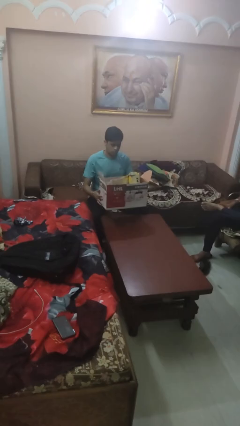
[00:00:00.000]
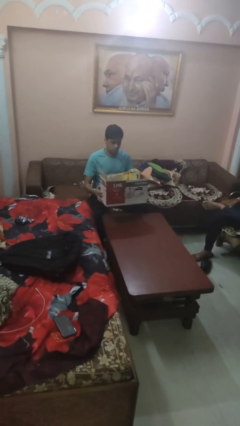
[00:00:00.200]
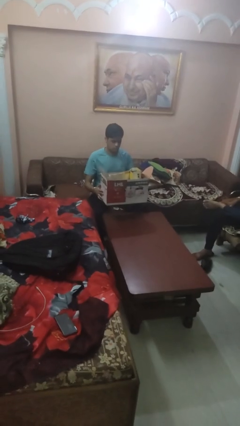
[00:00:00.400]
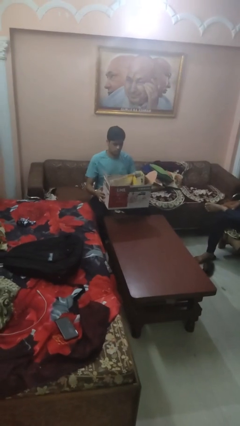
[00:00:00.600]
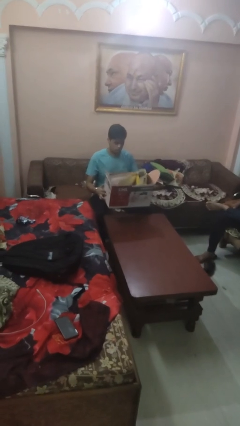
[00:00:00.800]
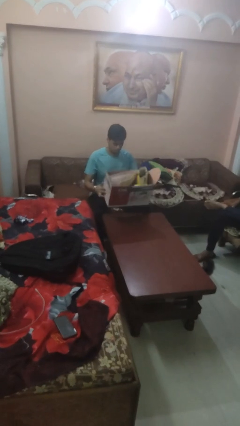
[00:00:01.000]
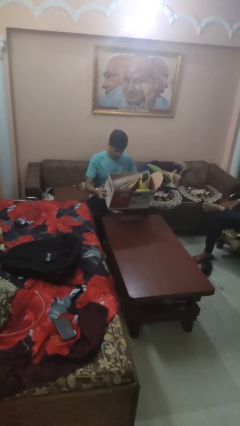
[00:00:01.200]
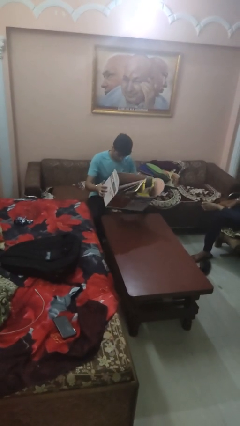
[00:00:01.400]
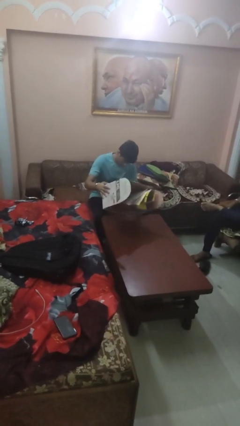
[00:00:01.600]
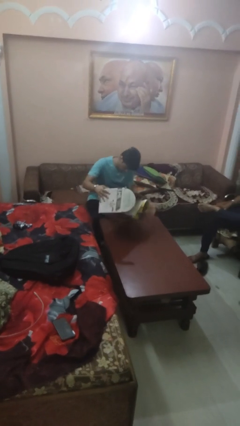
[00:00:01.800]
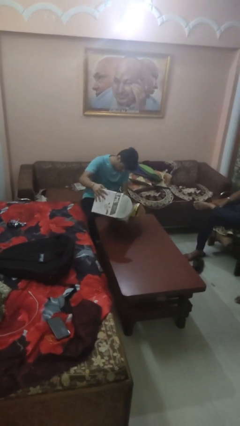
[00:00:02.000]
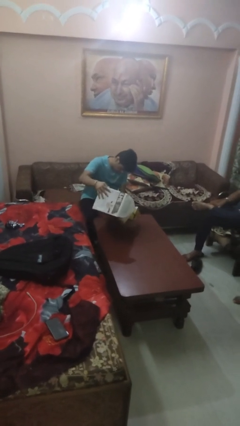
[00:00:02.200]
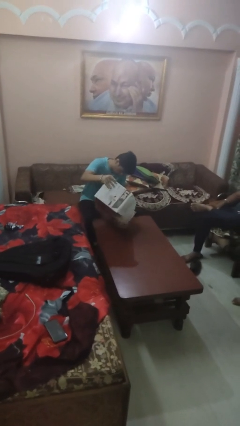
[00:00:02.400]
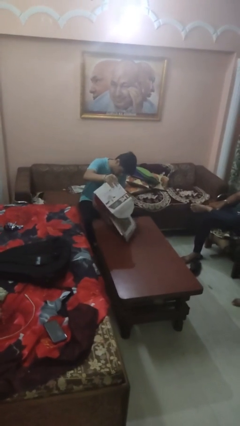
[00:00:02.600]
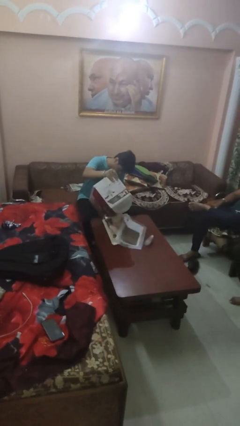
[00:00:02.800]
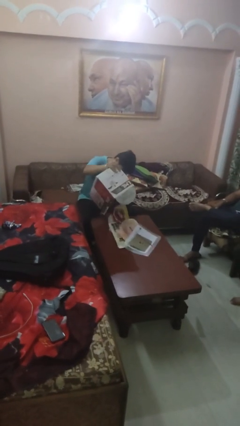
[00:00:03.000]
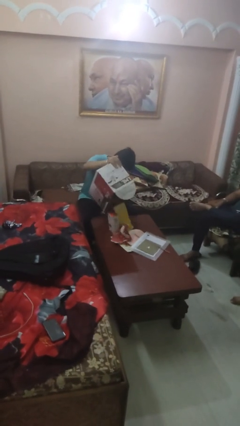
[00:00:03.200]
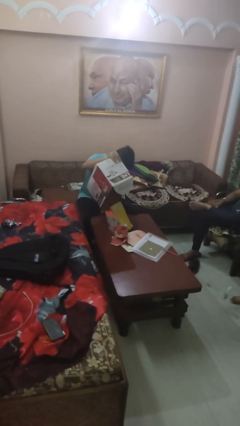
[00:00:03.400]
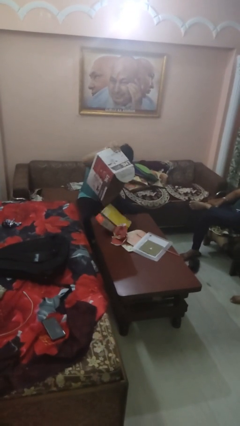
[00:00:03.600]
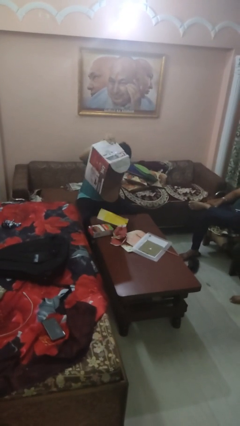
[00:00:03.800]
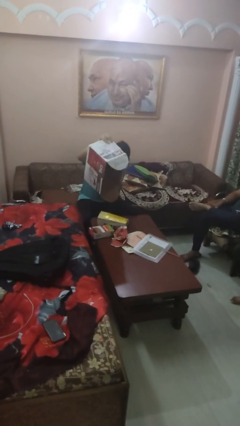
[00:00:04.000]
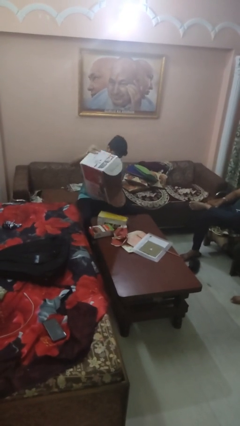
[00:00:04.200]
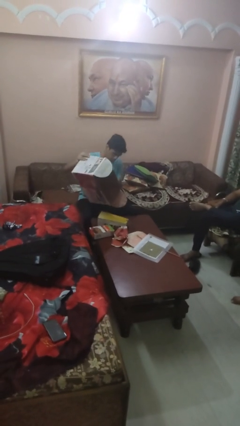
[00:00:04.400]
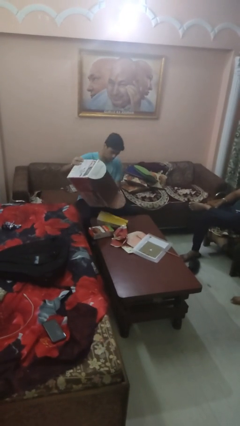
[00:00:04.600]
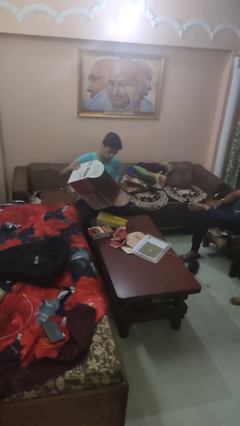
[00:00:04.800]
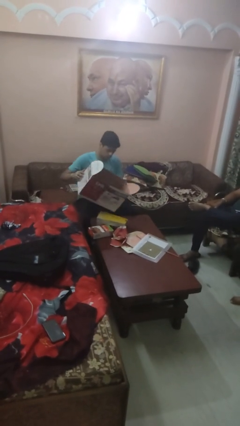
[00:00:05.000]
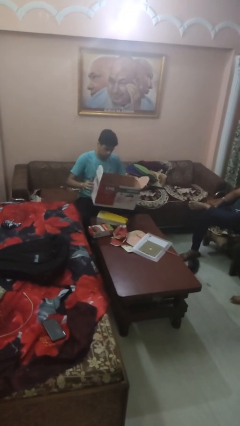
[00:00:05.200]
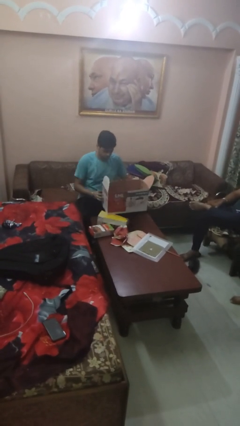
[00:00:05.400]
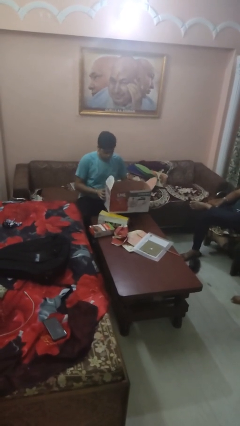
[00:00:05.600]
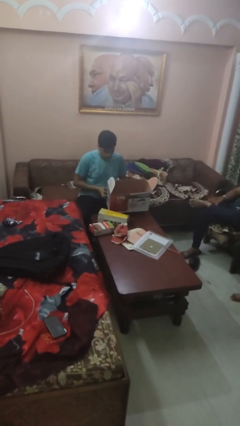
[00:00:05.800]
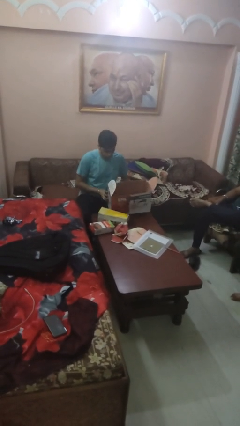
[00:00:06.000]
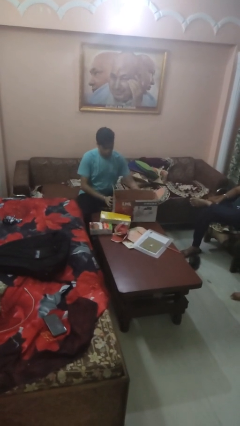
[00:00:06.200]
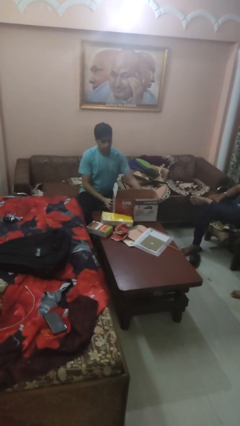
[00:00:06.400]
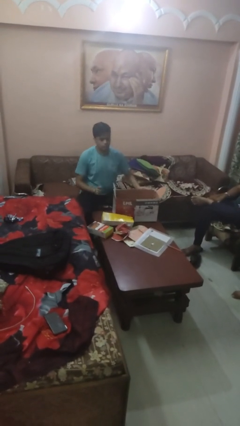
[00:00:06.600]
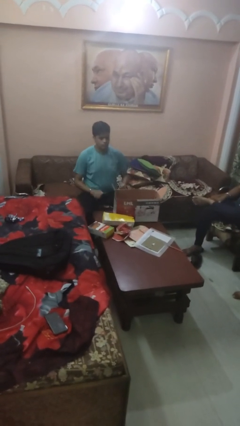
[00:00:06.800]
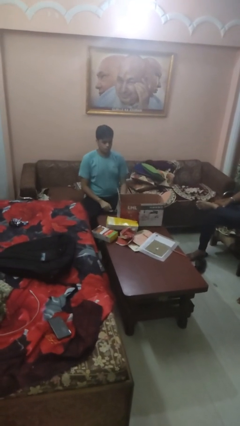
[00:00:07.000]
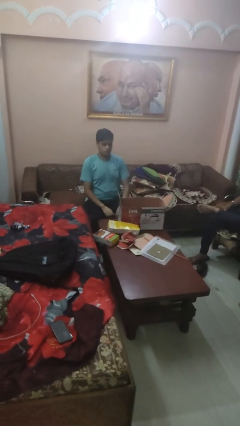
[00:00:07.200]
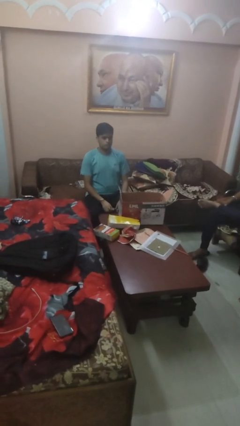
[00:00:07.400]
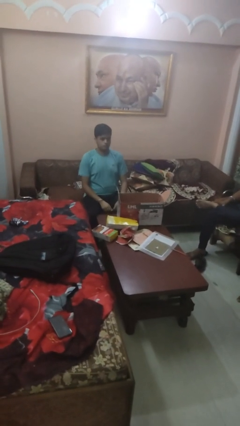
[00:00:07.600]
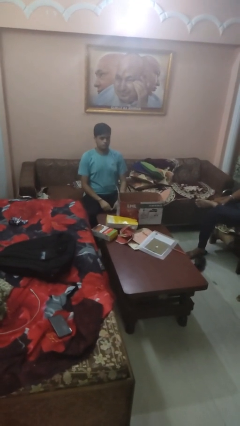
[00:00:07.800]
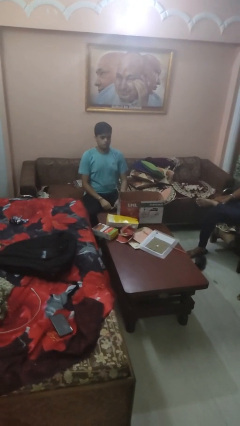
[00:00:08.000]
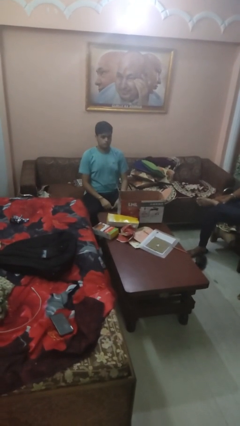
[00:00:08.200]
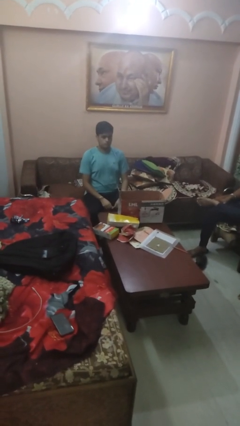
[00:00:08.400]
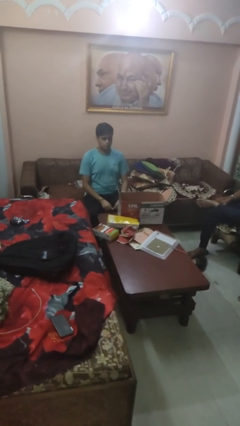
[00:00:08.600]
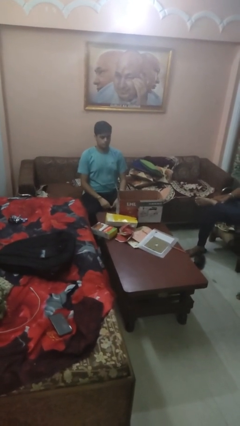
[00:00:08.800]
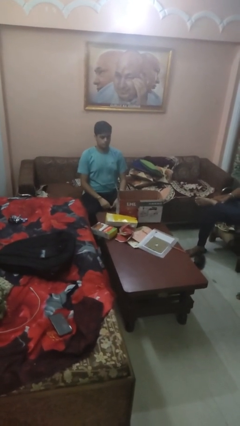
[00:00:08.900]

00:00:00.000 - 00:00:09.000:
person unloads box onto table

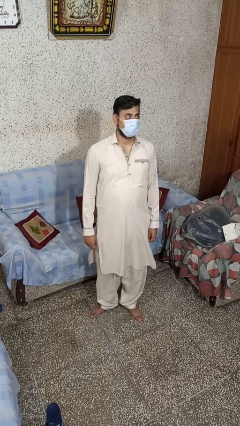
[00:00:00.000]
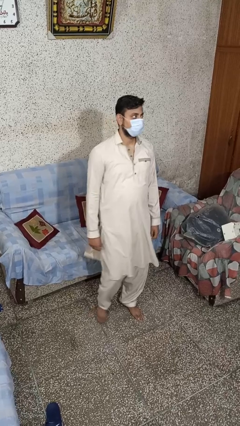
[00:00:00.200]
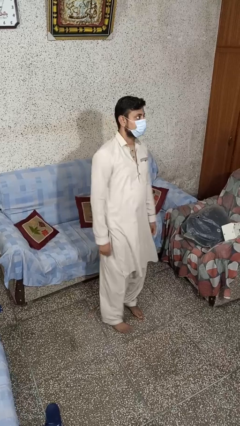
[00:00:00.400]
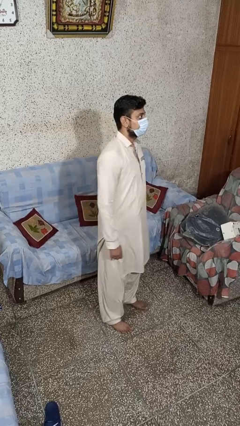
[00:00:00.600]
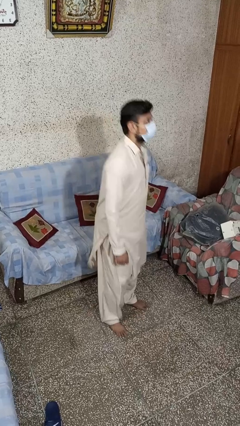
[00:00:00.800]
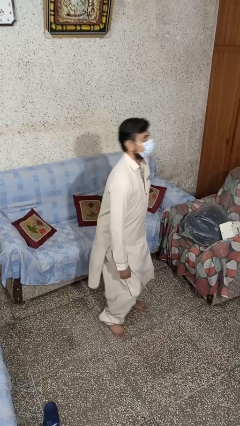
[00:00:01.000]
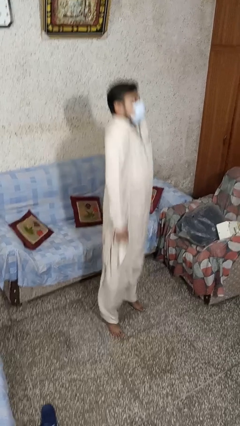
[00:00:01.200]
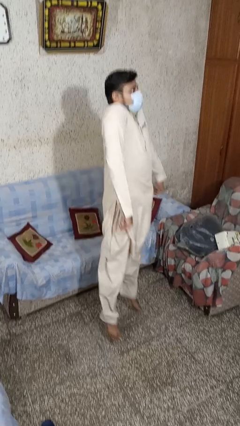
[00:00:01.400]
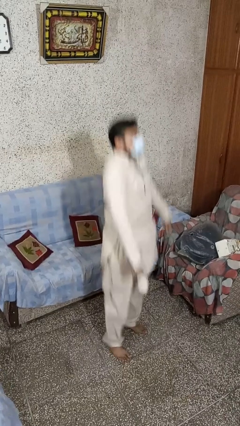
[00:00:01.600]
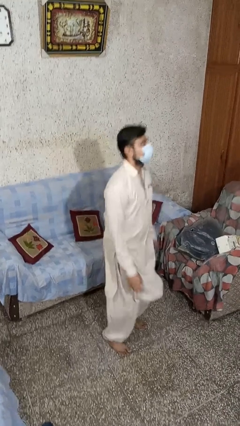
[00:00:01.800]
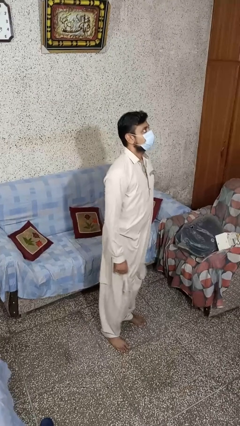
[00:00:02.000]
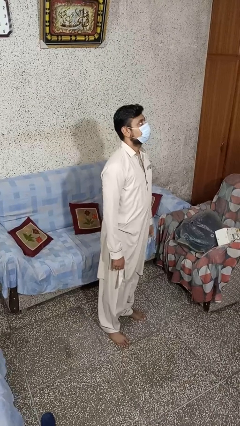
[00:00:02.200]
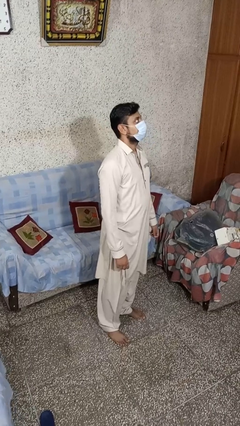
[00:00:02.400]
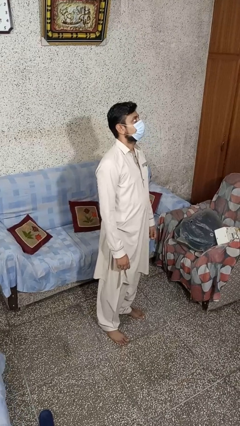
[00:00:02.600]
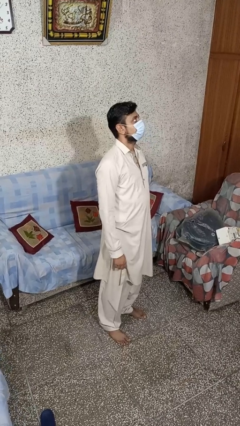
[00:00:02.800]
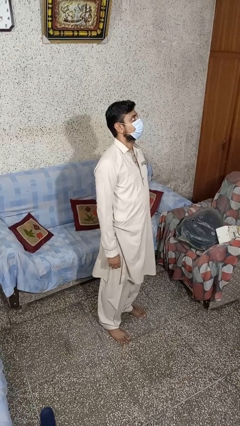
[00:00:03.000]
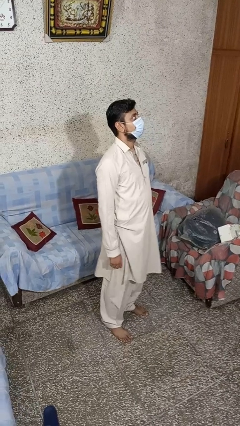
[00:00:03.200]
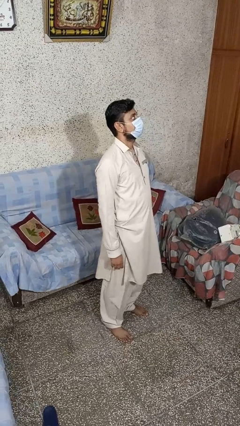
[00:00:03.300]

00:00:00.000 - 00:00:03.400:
person jumps

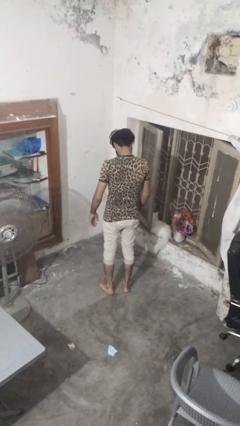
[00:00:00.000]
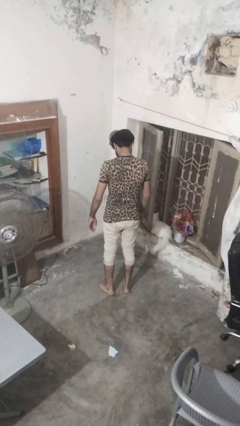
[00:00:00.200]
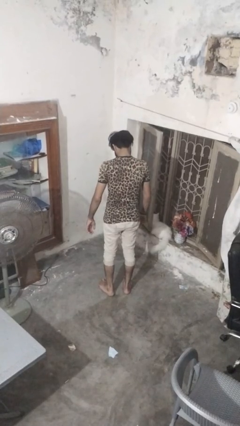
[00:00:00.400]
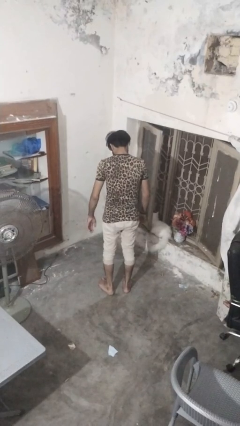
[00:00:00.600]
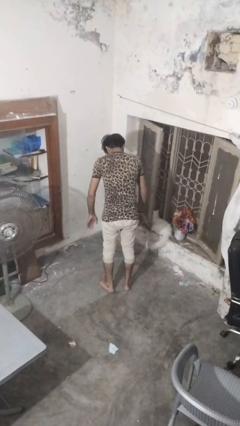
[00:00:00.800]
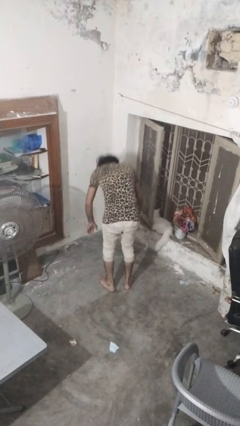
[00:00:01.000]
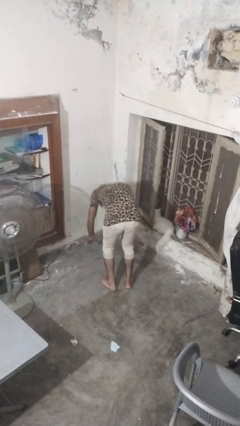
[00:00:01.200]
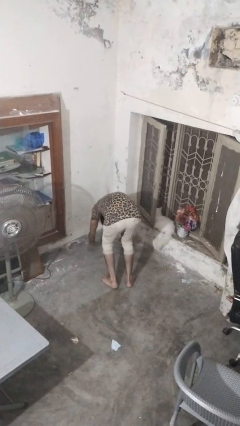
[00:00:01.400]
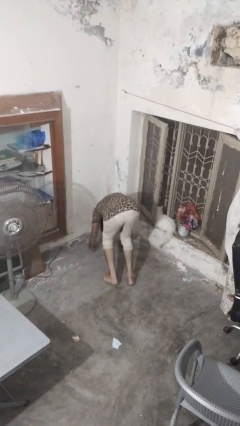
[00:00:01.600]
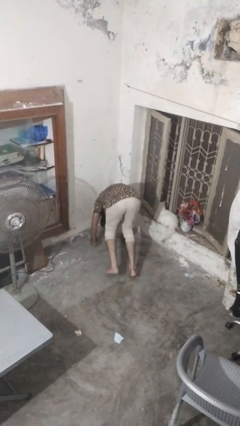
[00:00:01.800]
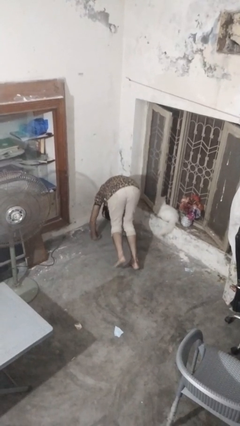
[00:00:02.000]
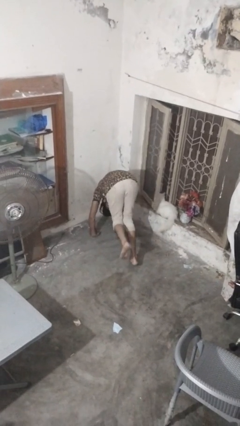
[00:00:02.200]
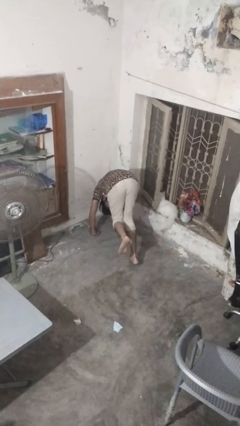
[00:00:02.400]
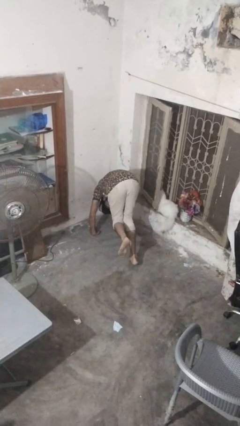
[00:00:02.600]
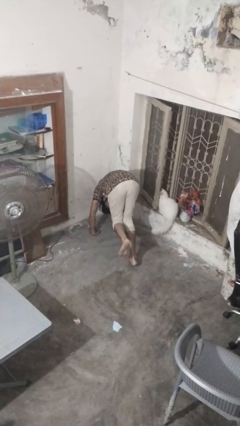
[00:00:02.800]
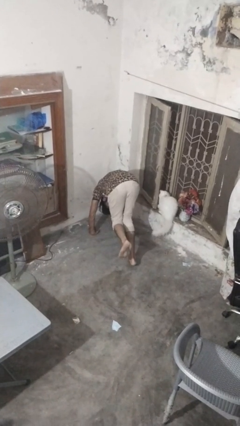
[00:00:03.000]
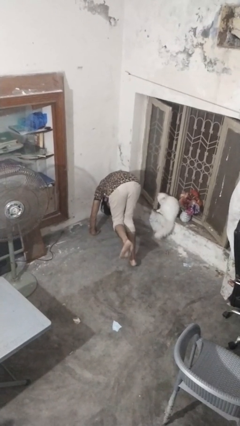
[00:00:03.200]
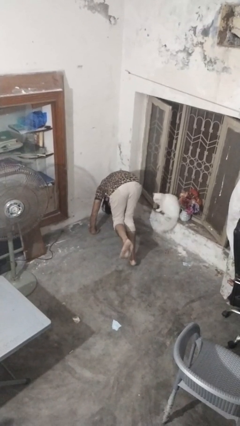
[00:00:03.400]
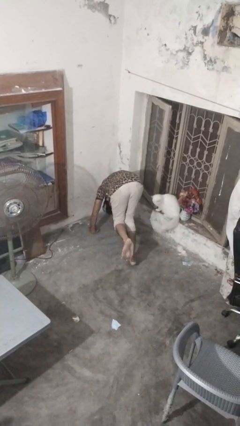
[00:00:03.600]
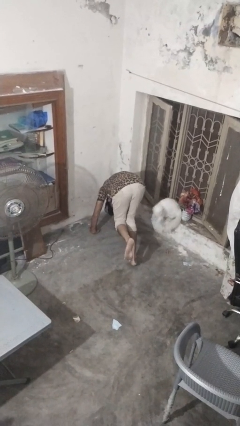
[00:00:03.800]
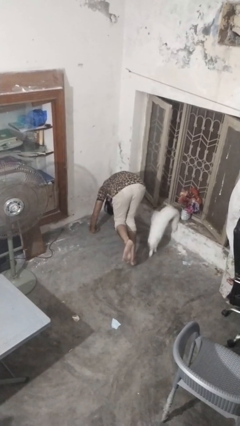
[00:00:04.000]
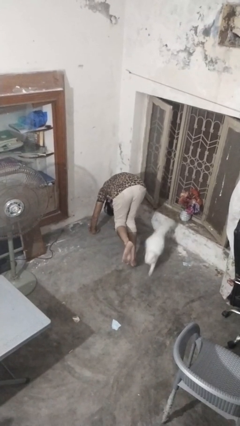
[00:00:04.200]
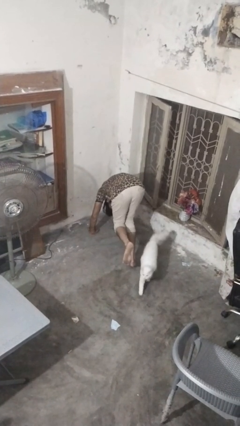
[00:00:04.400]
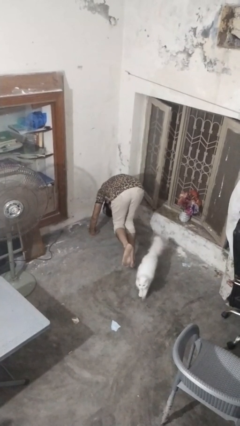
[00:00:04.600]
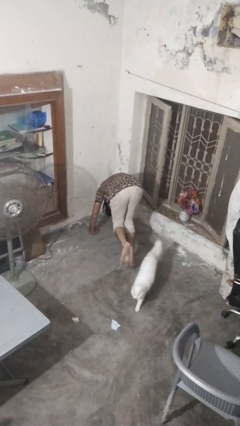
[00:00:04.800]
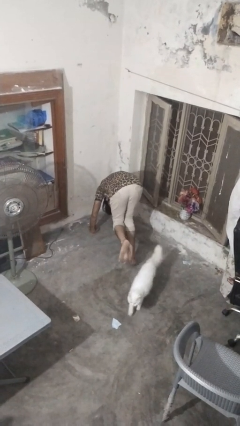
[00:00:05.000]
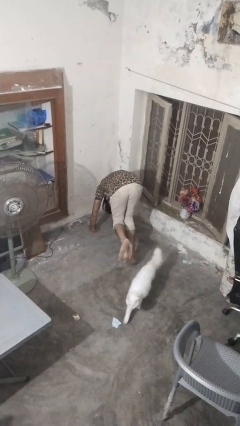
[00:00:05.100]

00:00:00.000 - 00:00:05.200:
person handstand
